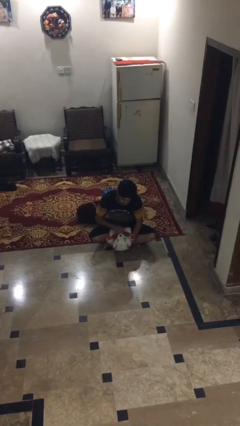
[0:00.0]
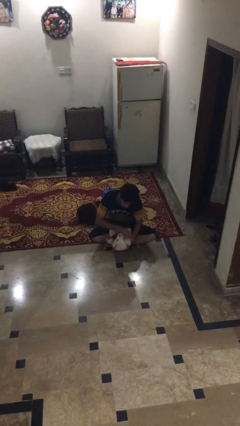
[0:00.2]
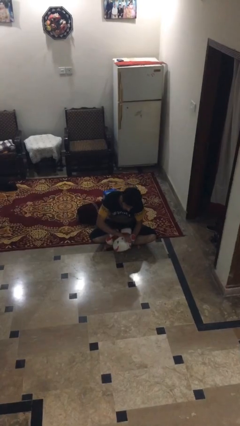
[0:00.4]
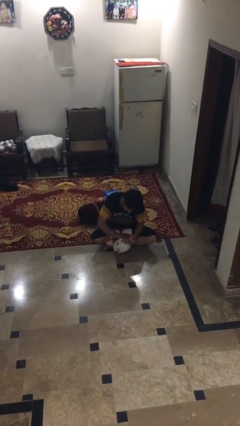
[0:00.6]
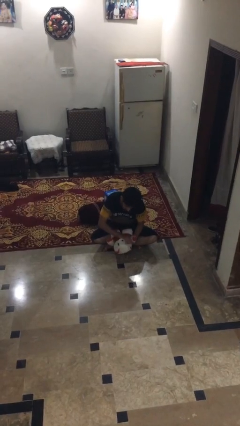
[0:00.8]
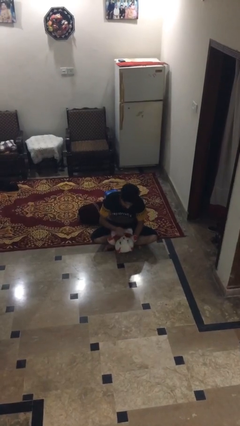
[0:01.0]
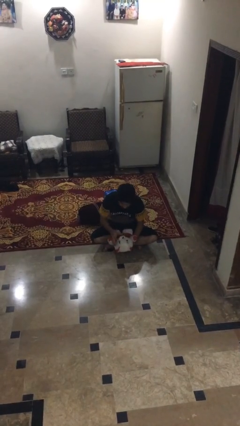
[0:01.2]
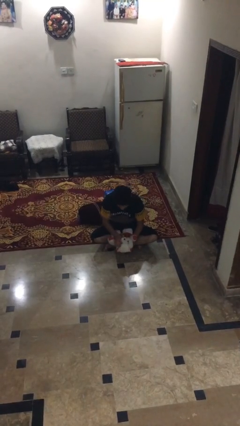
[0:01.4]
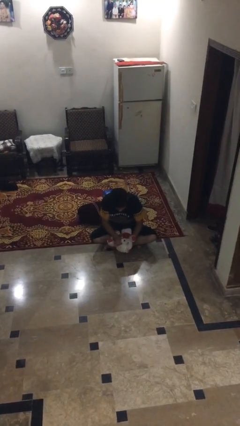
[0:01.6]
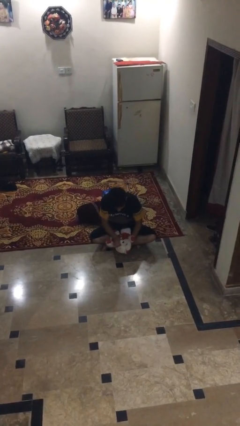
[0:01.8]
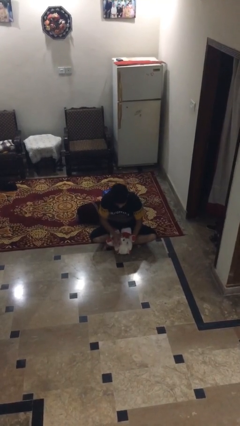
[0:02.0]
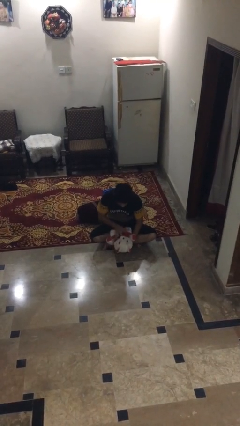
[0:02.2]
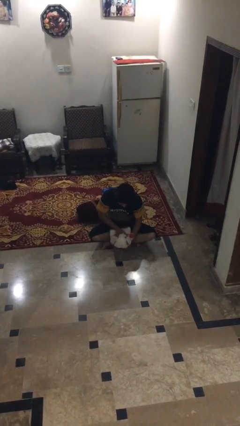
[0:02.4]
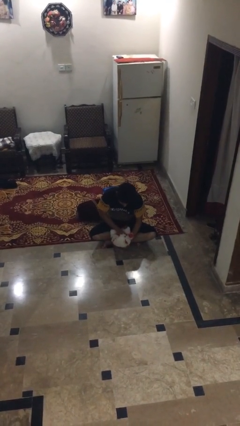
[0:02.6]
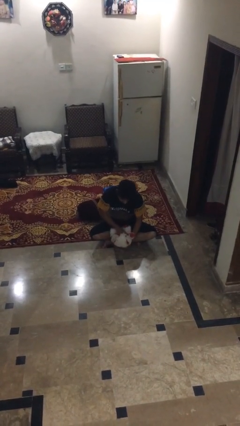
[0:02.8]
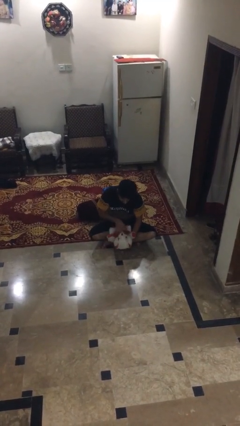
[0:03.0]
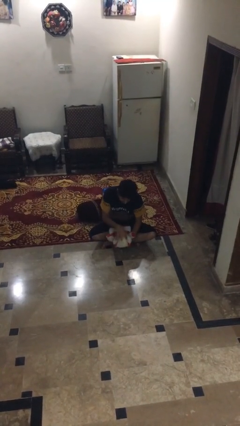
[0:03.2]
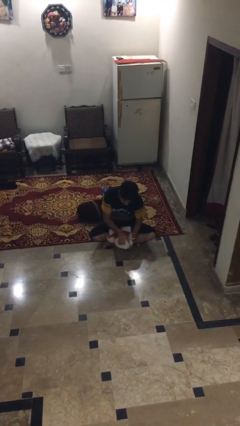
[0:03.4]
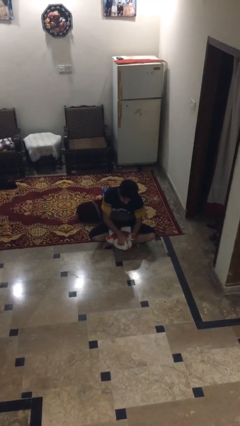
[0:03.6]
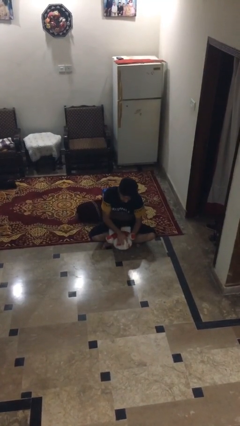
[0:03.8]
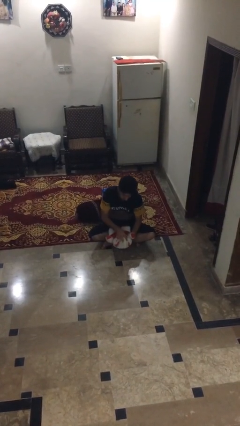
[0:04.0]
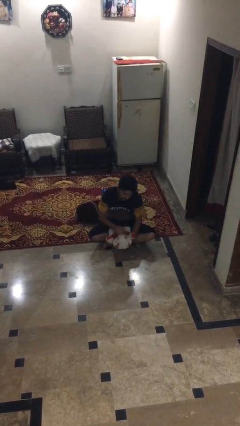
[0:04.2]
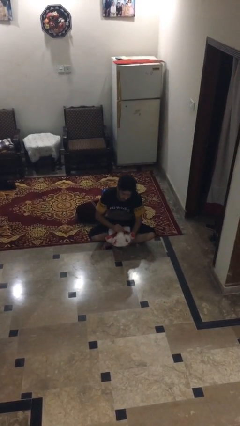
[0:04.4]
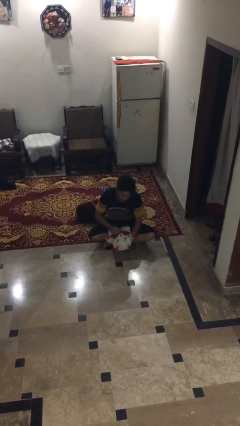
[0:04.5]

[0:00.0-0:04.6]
person squeezes object

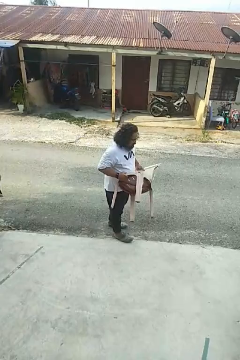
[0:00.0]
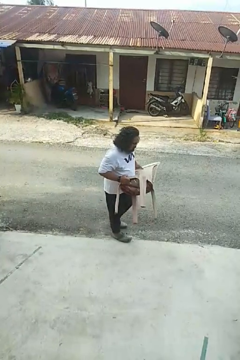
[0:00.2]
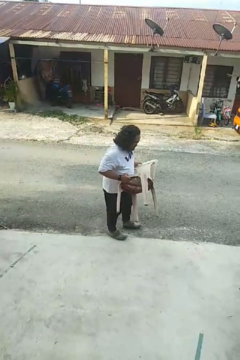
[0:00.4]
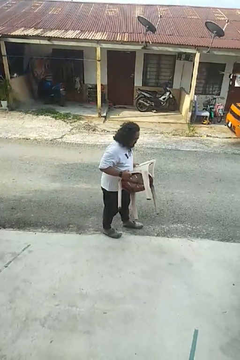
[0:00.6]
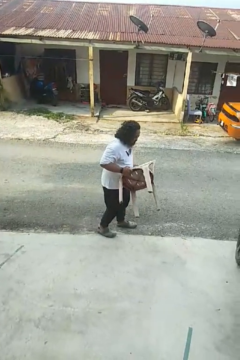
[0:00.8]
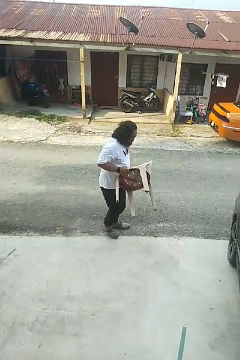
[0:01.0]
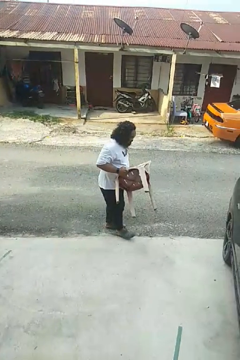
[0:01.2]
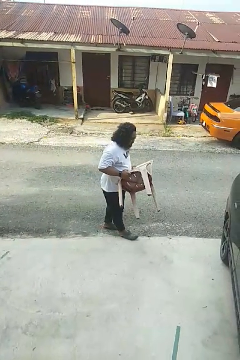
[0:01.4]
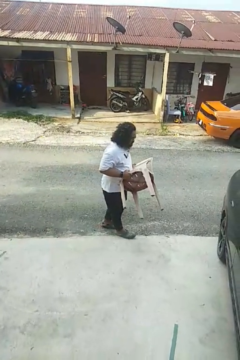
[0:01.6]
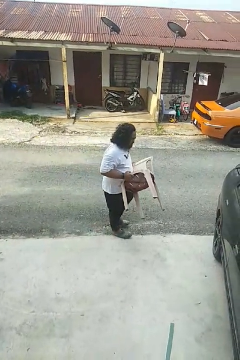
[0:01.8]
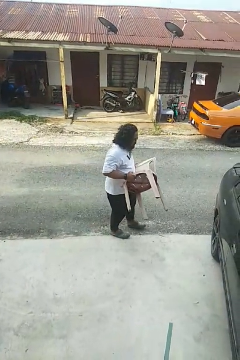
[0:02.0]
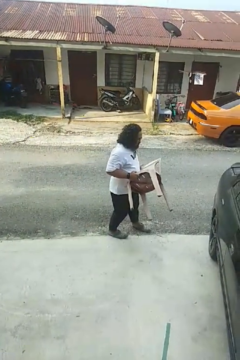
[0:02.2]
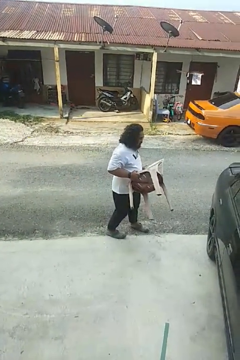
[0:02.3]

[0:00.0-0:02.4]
person carries furniture

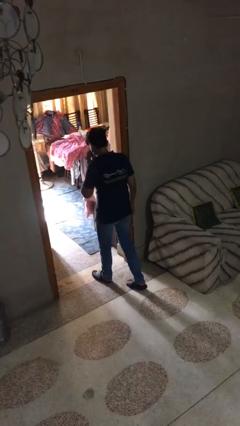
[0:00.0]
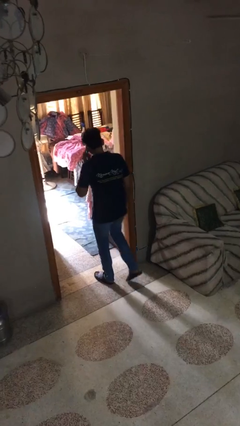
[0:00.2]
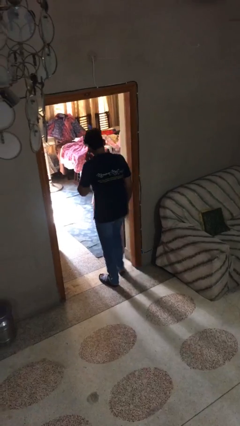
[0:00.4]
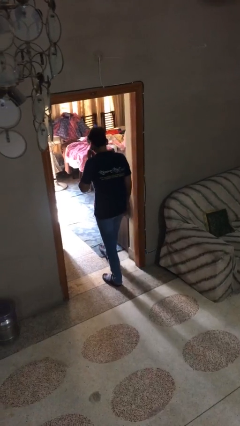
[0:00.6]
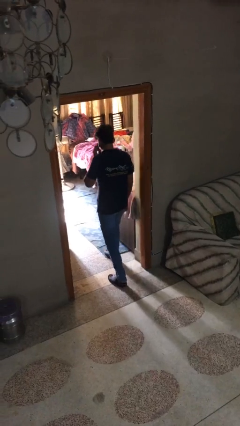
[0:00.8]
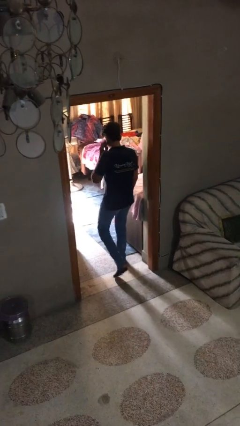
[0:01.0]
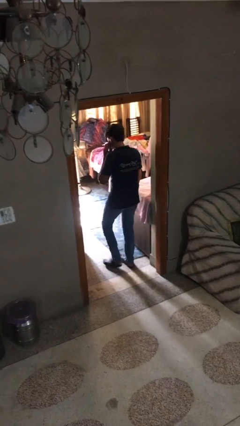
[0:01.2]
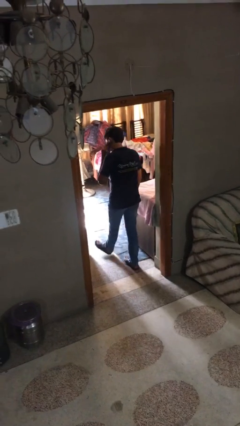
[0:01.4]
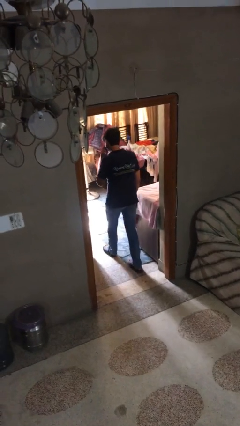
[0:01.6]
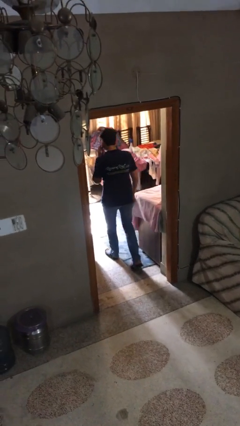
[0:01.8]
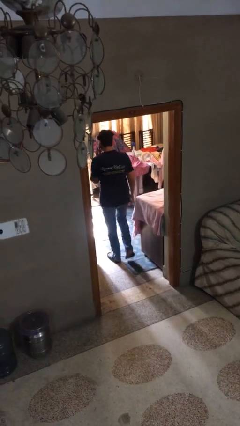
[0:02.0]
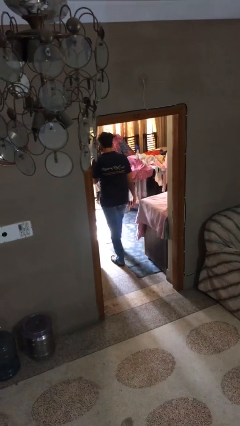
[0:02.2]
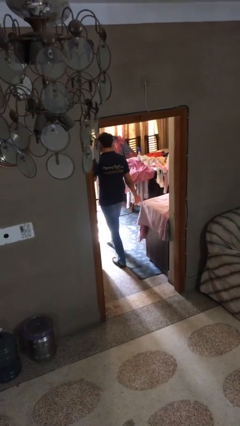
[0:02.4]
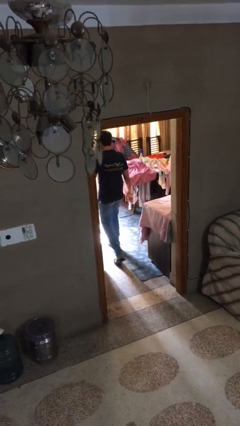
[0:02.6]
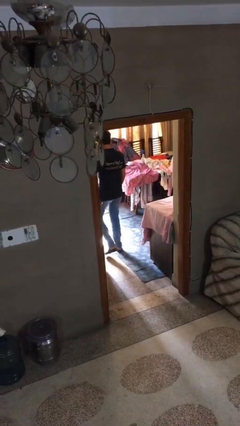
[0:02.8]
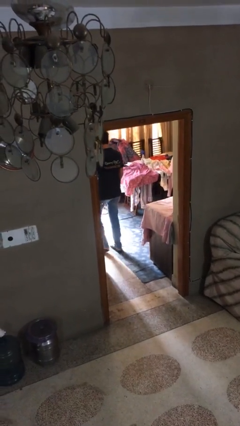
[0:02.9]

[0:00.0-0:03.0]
person exits scene through structure

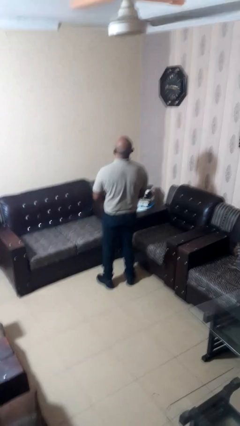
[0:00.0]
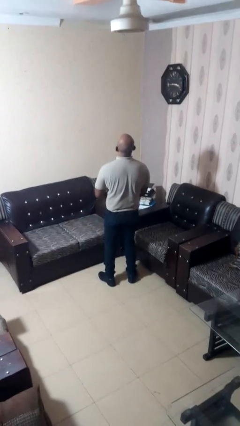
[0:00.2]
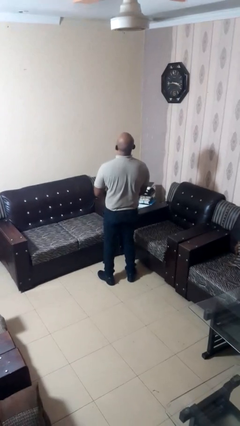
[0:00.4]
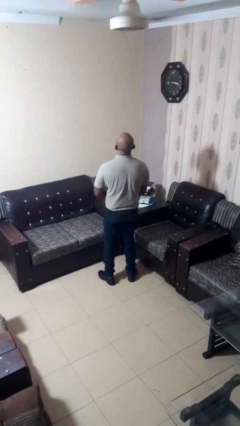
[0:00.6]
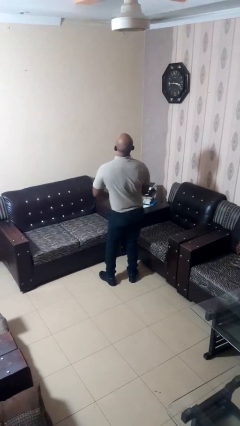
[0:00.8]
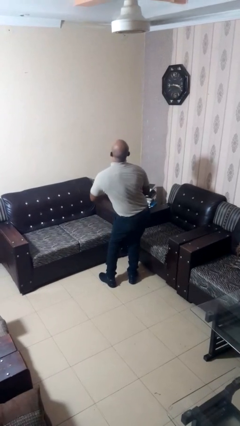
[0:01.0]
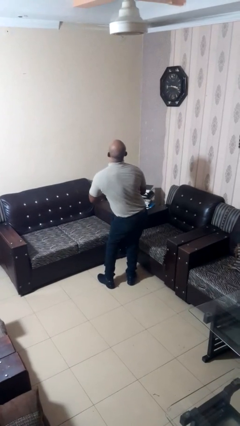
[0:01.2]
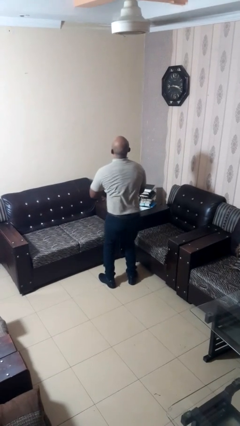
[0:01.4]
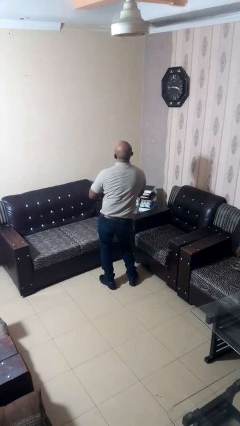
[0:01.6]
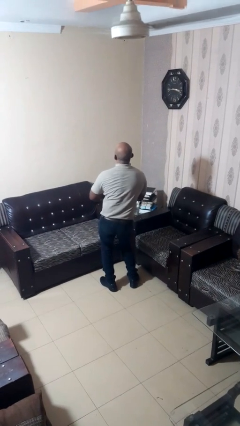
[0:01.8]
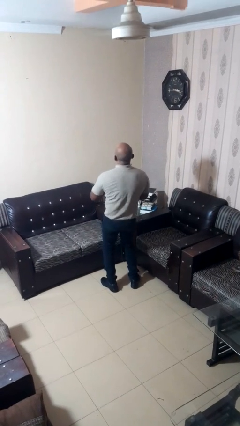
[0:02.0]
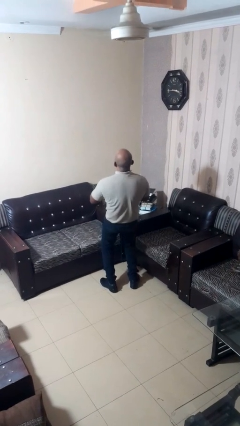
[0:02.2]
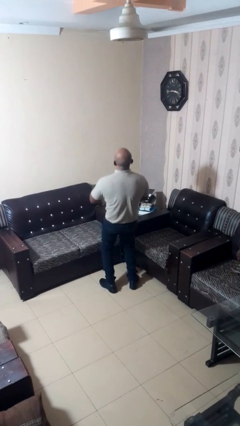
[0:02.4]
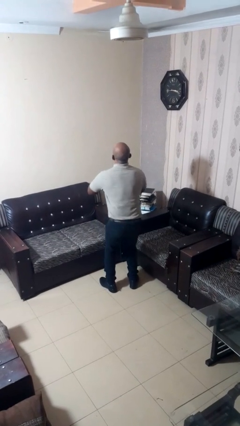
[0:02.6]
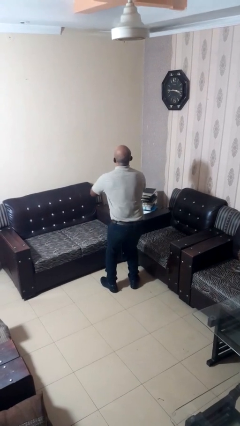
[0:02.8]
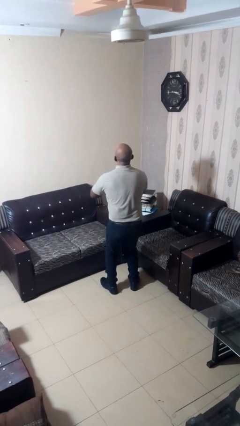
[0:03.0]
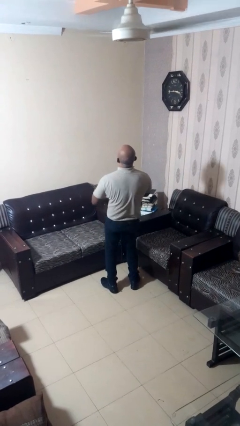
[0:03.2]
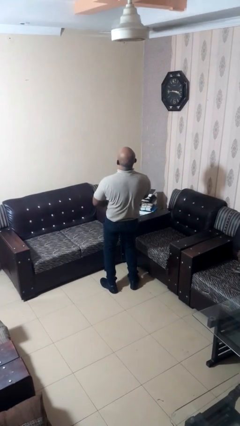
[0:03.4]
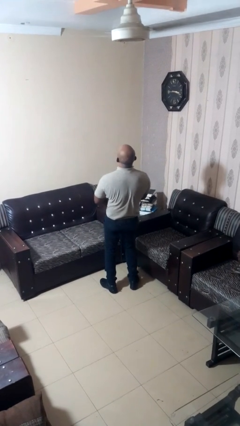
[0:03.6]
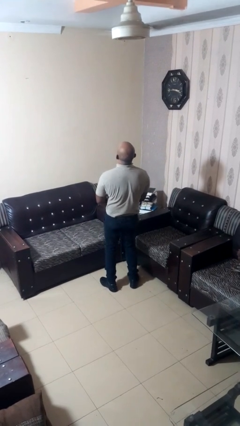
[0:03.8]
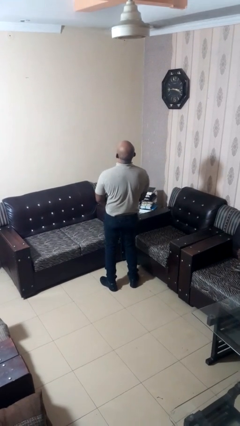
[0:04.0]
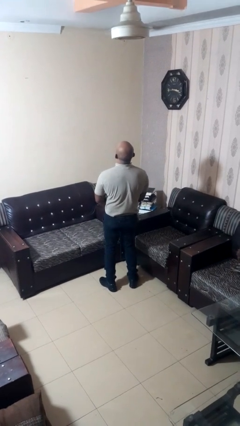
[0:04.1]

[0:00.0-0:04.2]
person wiggles hips

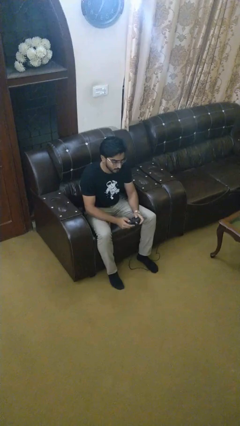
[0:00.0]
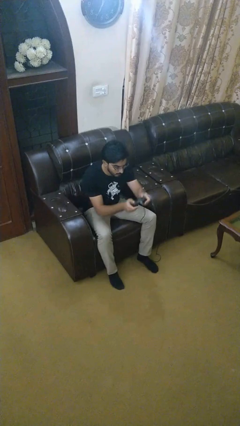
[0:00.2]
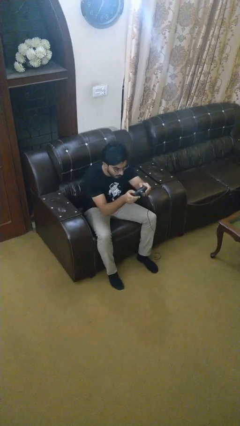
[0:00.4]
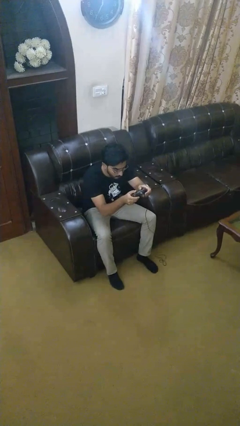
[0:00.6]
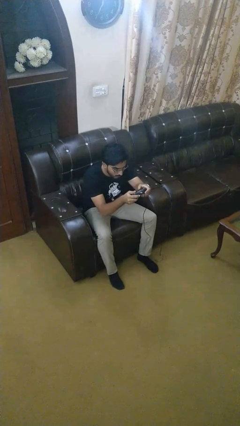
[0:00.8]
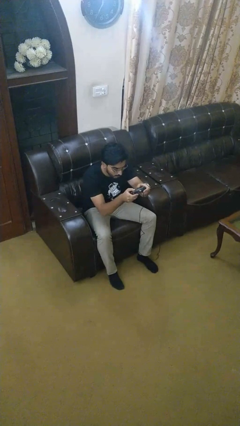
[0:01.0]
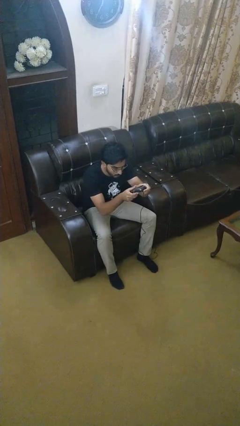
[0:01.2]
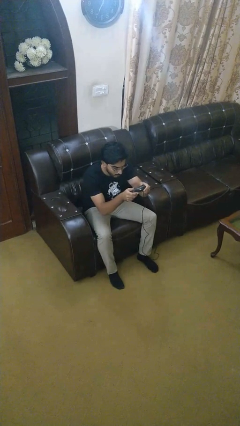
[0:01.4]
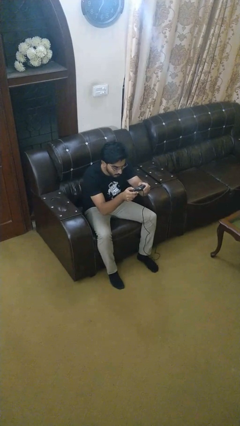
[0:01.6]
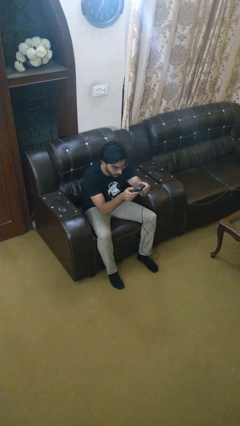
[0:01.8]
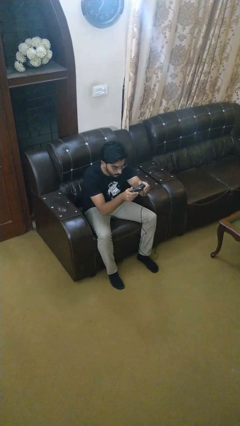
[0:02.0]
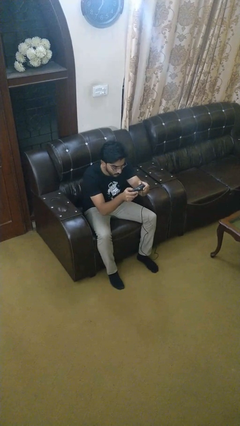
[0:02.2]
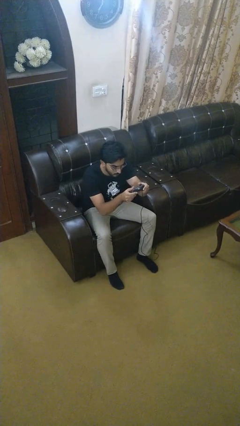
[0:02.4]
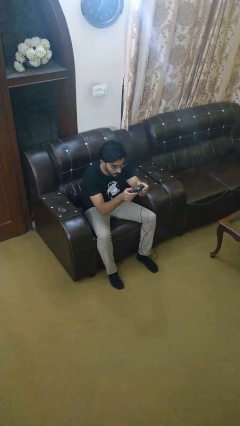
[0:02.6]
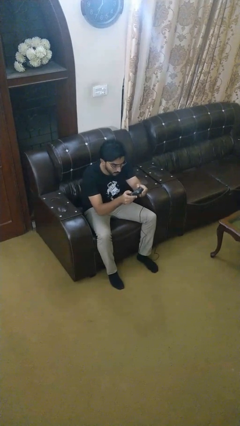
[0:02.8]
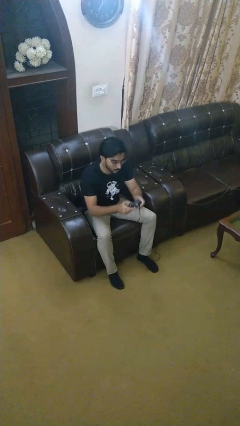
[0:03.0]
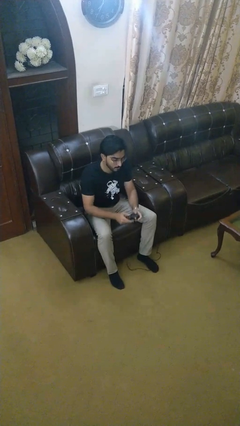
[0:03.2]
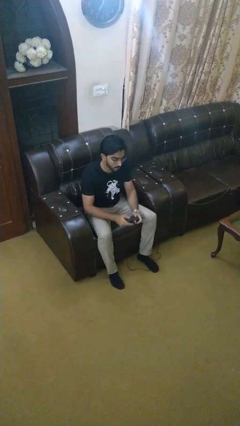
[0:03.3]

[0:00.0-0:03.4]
person interacts with handheld game

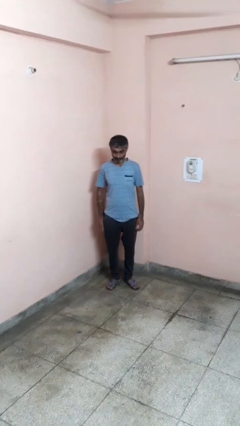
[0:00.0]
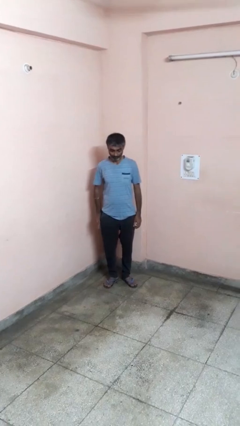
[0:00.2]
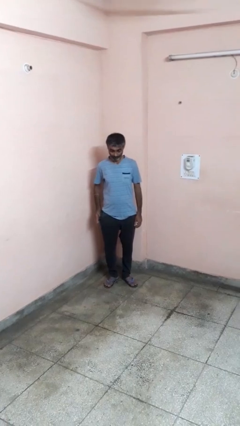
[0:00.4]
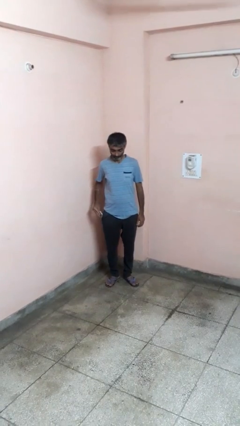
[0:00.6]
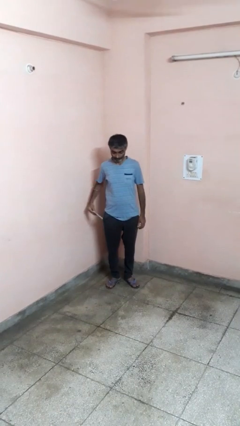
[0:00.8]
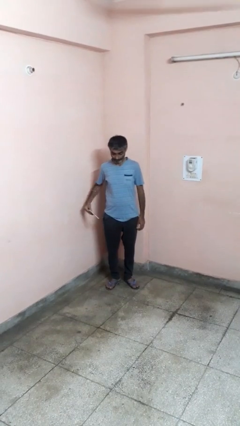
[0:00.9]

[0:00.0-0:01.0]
person takes phone from pocket
